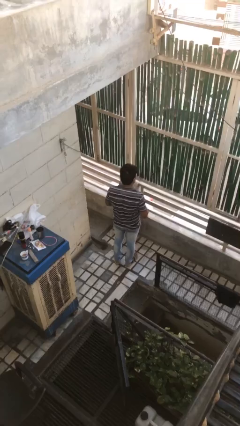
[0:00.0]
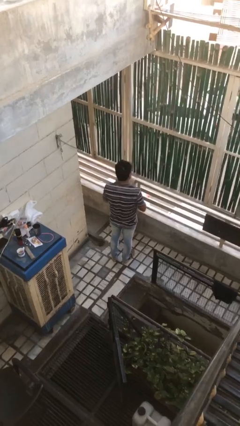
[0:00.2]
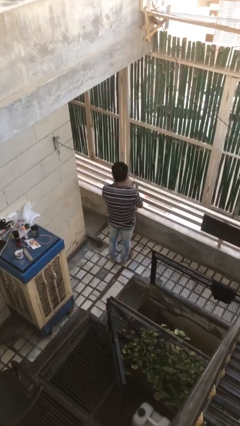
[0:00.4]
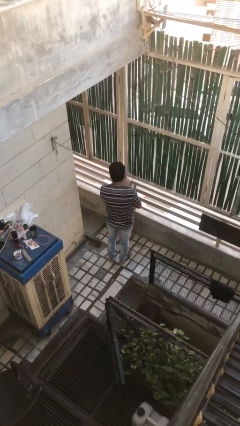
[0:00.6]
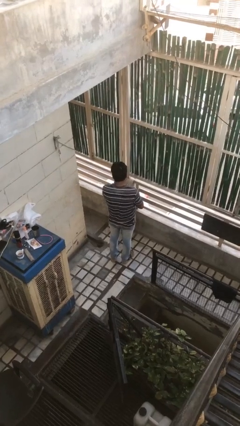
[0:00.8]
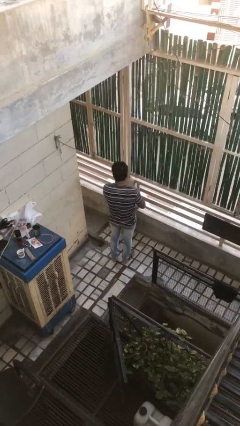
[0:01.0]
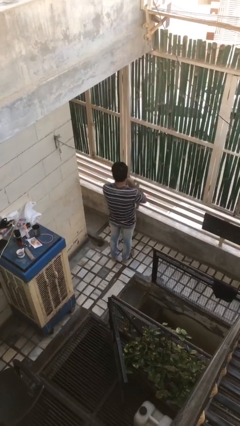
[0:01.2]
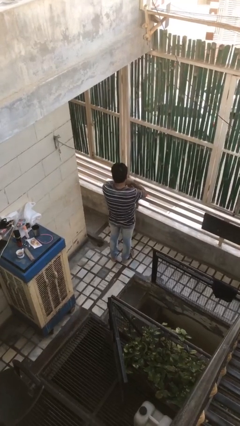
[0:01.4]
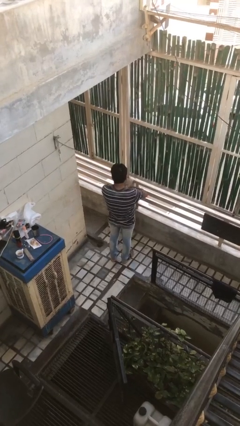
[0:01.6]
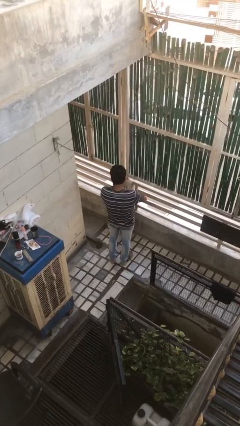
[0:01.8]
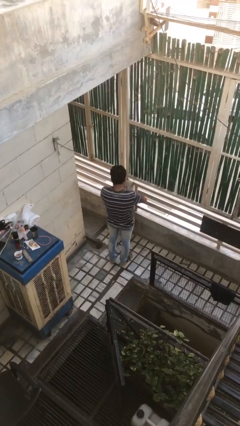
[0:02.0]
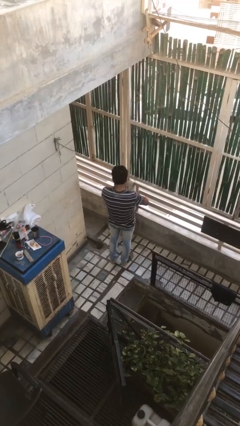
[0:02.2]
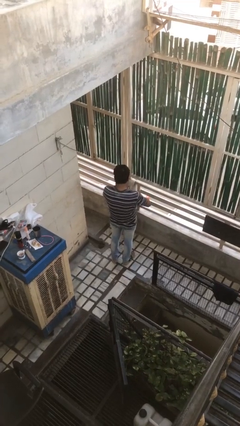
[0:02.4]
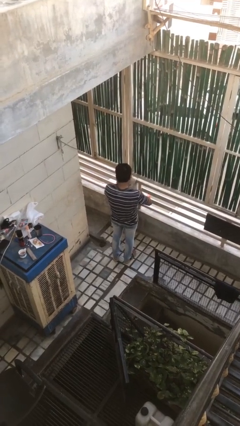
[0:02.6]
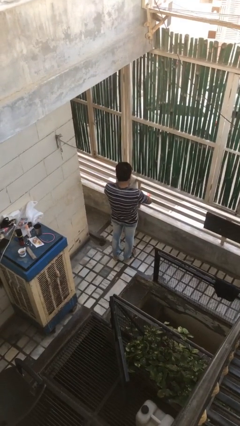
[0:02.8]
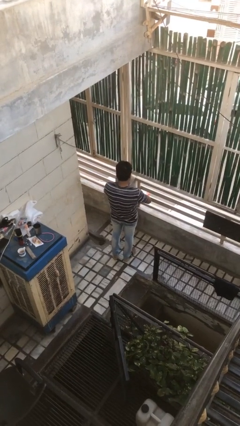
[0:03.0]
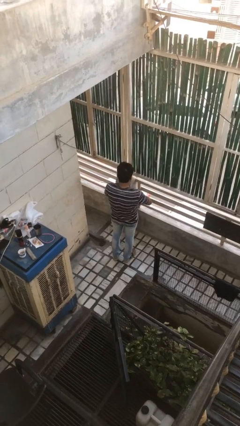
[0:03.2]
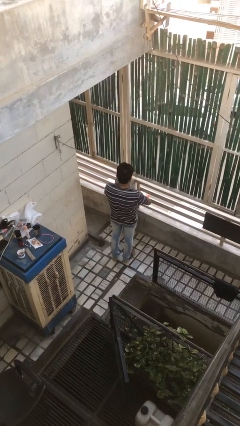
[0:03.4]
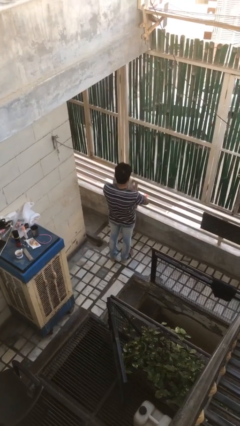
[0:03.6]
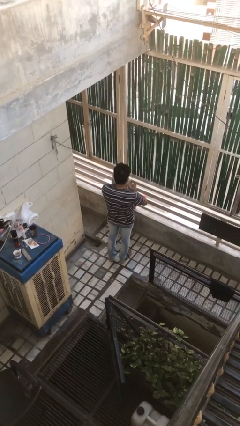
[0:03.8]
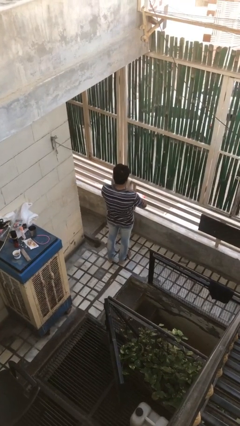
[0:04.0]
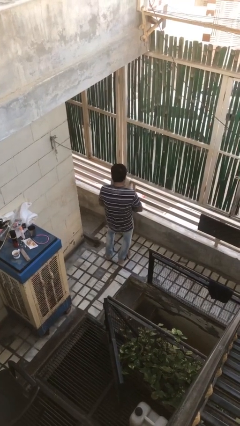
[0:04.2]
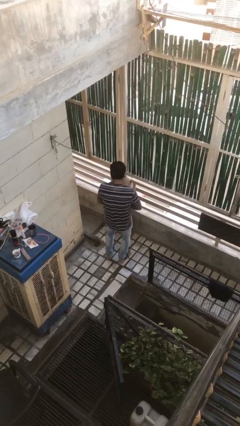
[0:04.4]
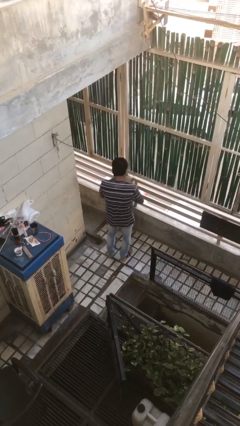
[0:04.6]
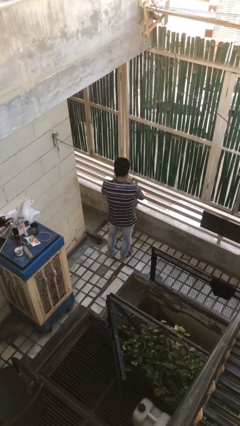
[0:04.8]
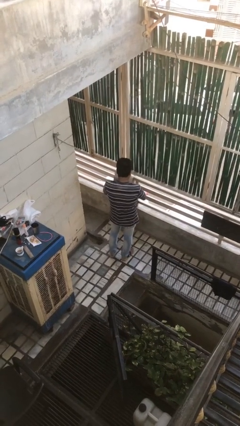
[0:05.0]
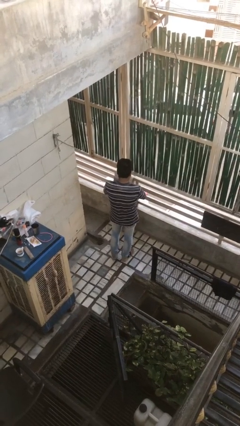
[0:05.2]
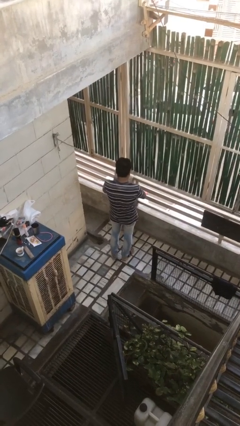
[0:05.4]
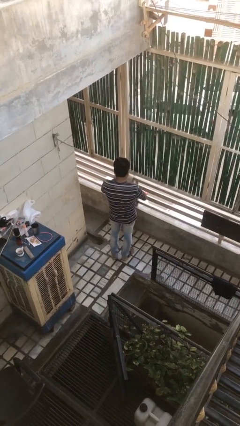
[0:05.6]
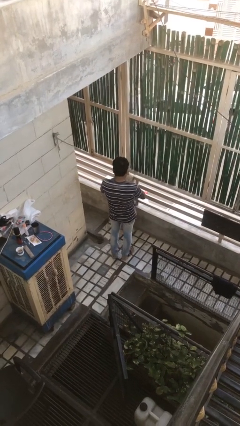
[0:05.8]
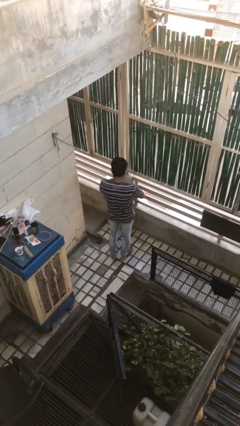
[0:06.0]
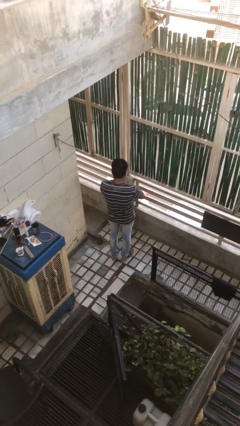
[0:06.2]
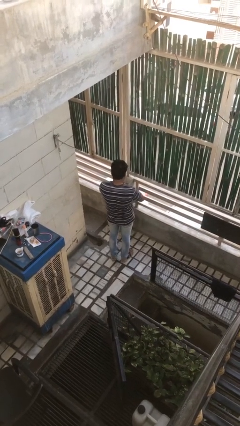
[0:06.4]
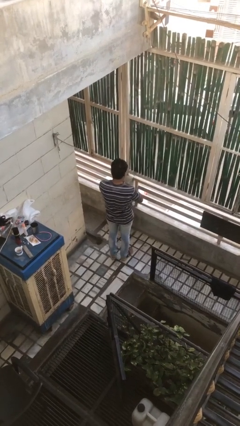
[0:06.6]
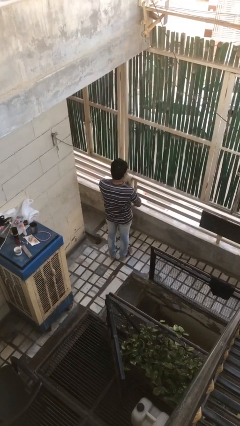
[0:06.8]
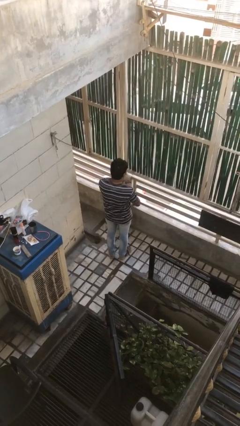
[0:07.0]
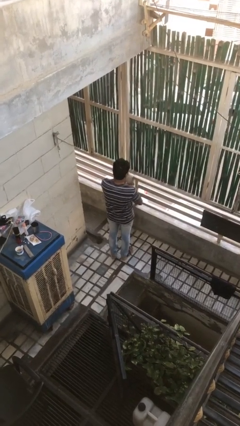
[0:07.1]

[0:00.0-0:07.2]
person puts on wristwatch

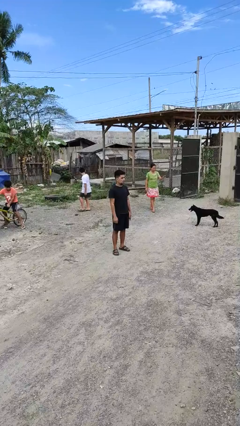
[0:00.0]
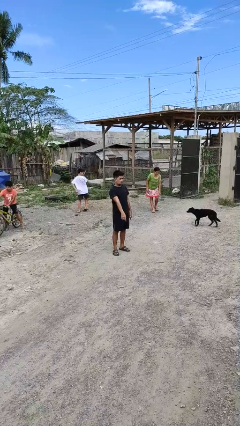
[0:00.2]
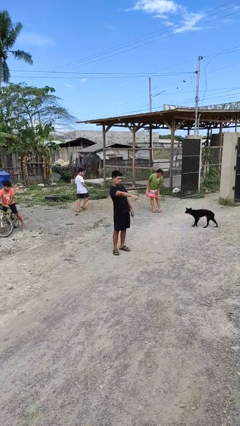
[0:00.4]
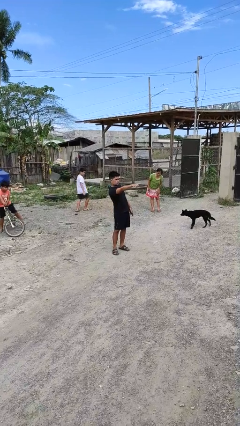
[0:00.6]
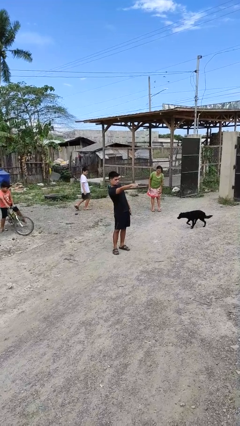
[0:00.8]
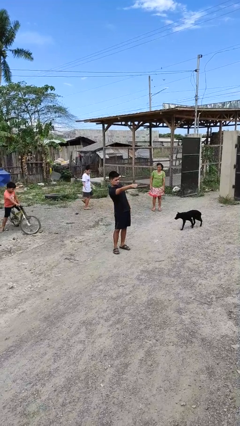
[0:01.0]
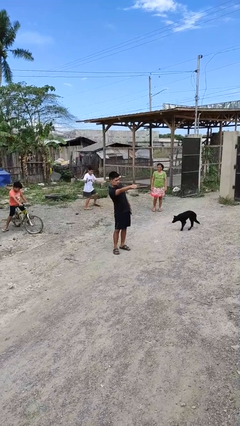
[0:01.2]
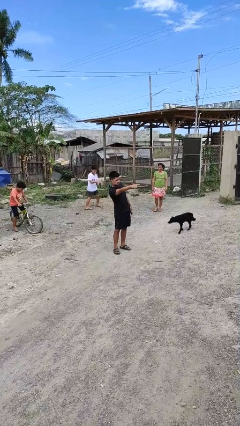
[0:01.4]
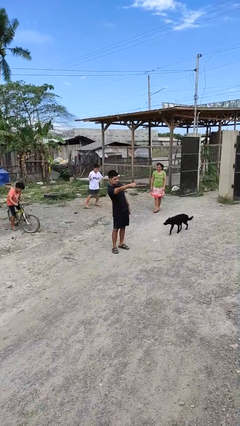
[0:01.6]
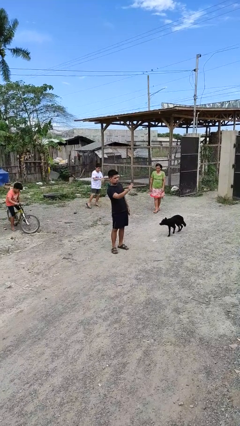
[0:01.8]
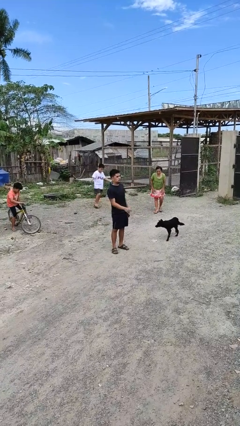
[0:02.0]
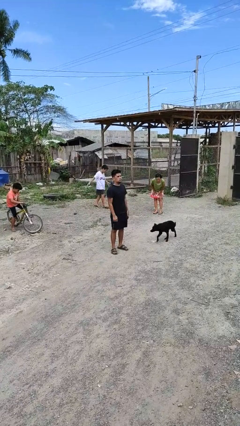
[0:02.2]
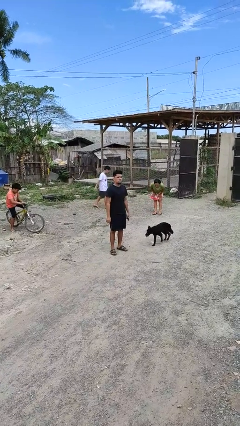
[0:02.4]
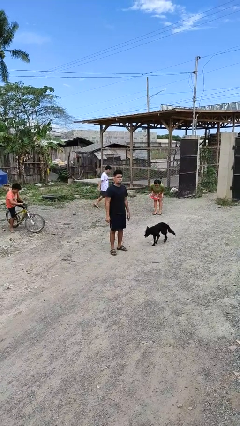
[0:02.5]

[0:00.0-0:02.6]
person points at person

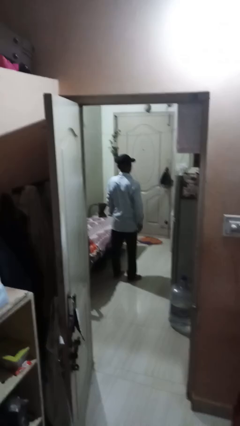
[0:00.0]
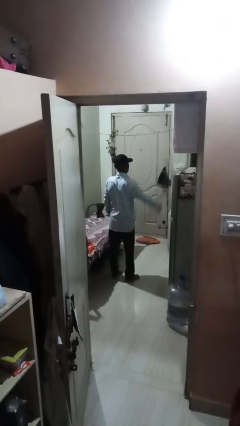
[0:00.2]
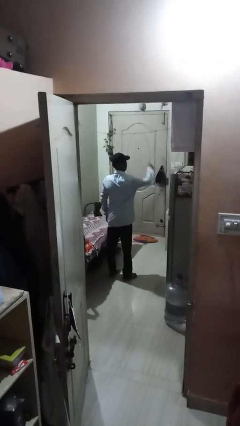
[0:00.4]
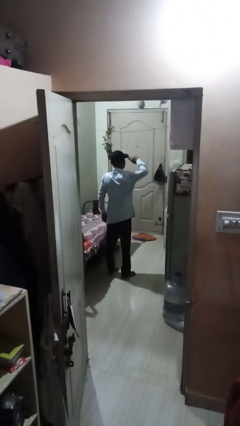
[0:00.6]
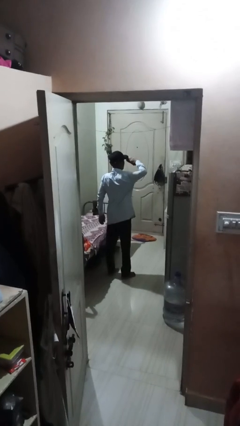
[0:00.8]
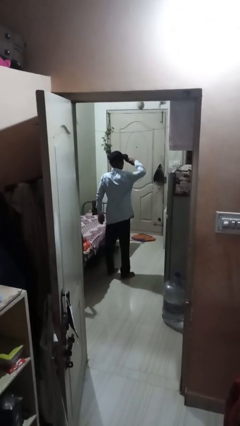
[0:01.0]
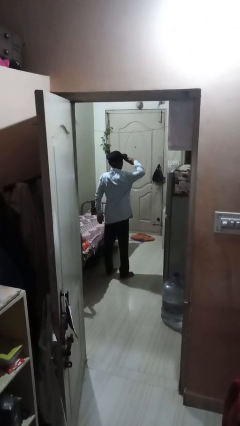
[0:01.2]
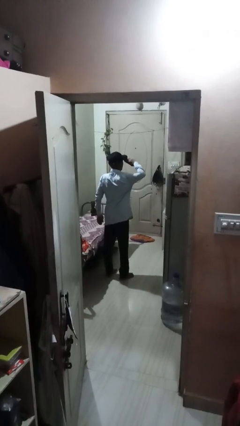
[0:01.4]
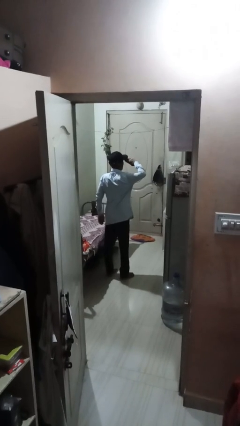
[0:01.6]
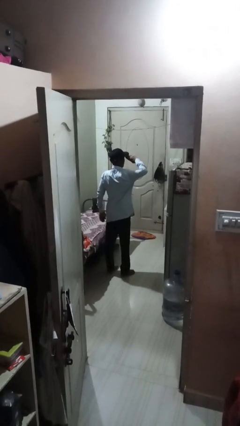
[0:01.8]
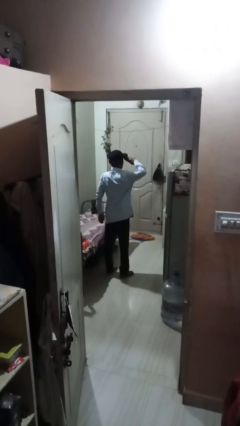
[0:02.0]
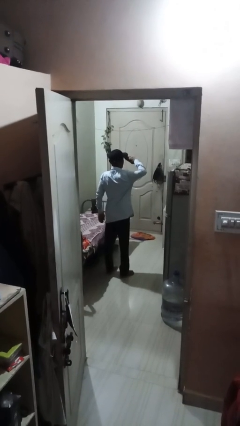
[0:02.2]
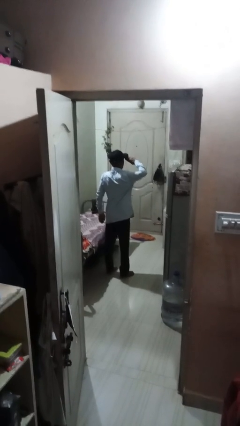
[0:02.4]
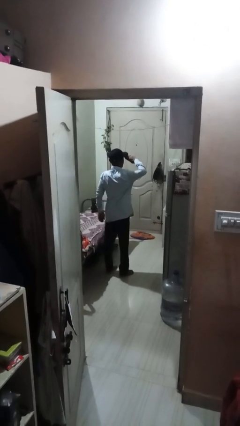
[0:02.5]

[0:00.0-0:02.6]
person salutes

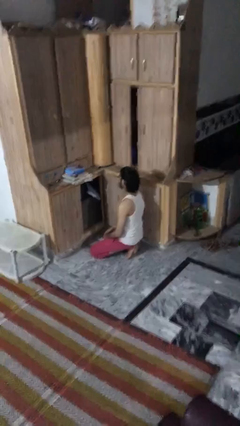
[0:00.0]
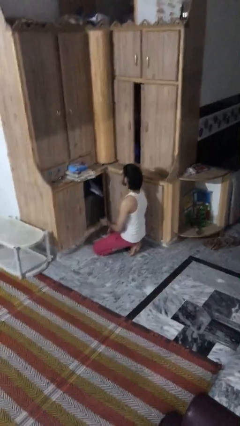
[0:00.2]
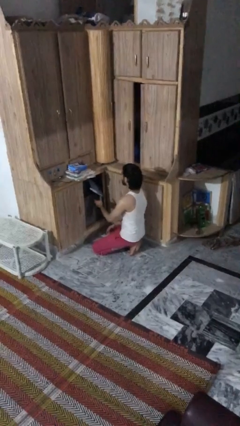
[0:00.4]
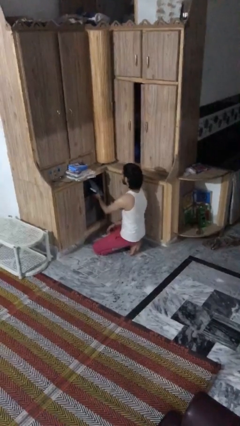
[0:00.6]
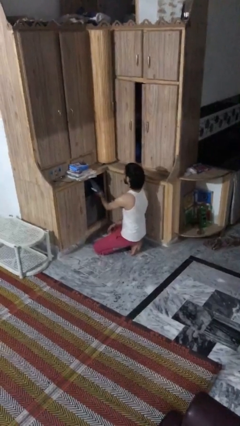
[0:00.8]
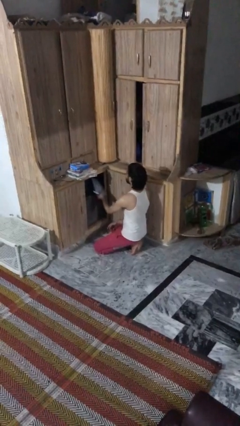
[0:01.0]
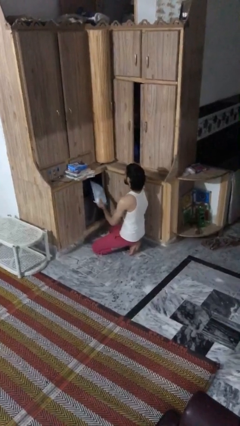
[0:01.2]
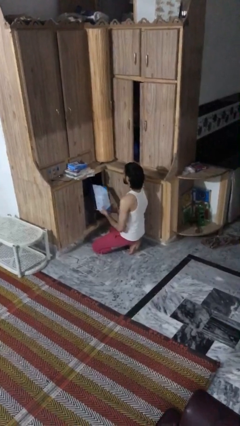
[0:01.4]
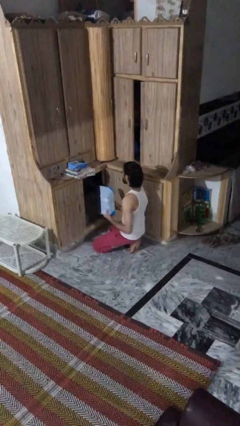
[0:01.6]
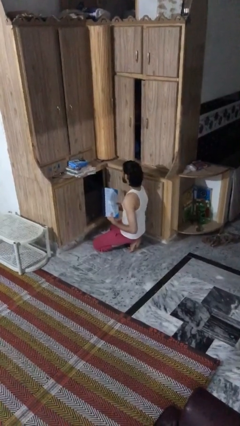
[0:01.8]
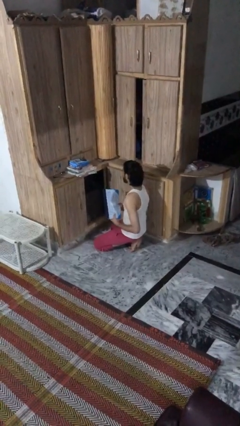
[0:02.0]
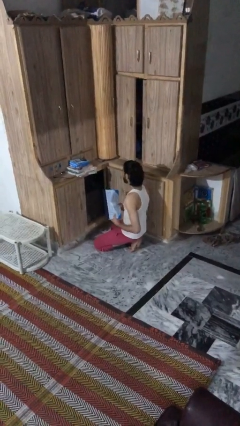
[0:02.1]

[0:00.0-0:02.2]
person picks up object from cabinet

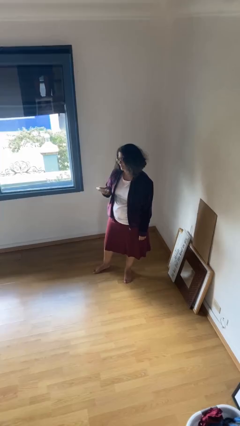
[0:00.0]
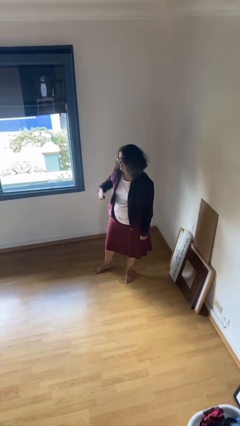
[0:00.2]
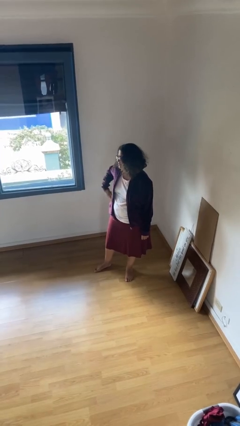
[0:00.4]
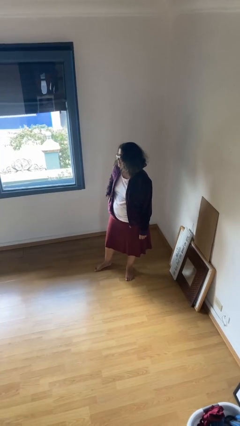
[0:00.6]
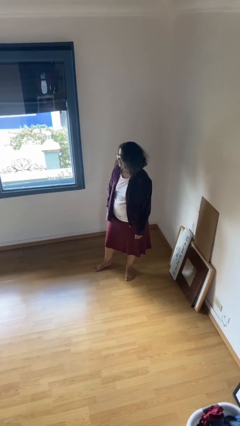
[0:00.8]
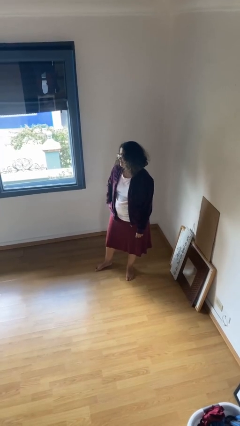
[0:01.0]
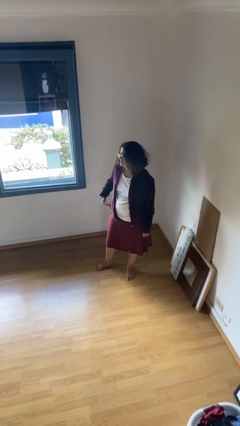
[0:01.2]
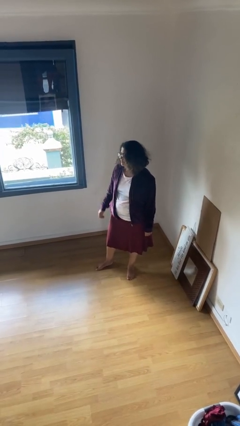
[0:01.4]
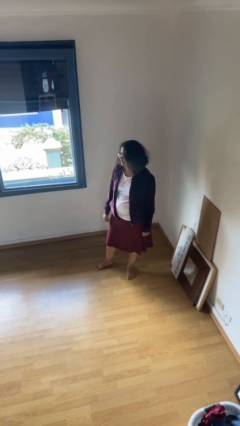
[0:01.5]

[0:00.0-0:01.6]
person puts phone into pocket

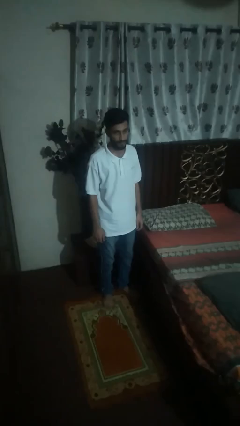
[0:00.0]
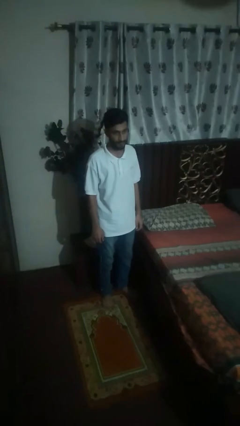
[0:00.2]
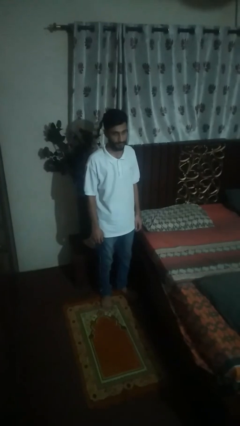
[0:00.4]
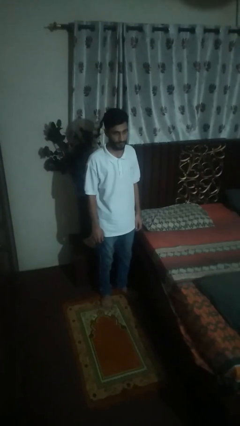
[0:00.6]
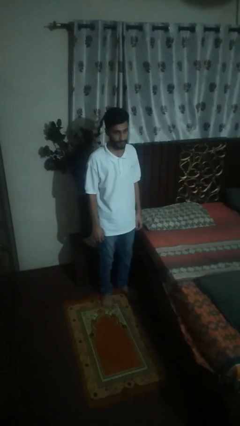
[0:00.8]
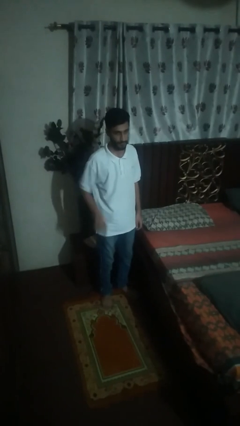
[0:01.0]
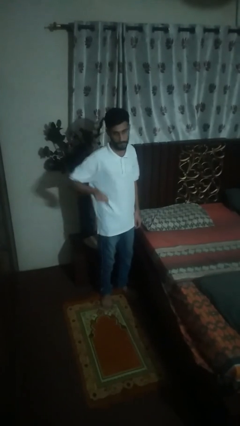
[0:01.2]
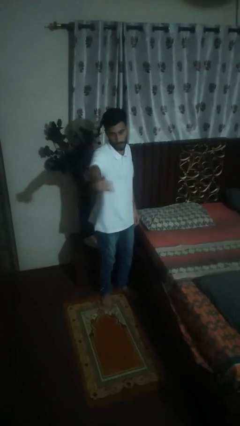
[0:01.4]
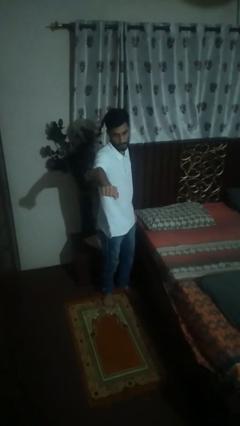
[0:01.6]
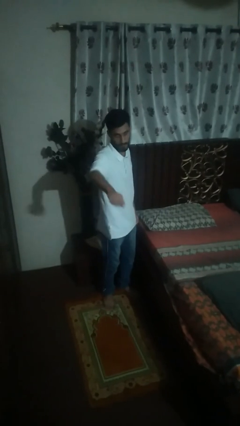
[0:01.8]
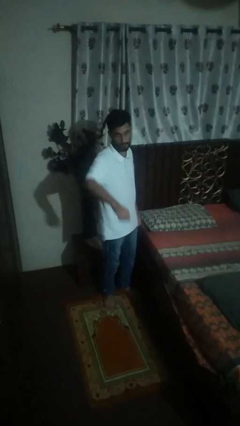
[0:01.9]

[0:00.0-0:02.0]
person karate chop
